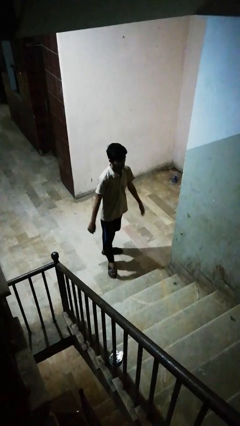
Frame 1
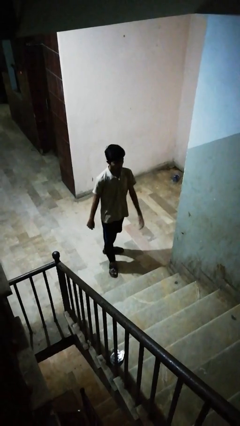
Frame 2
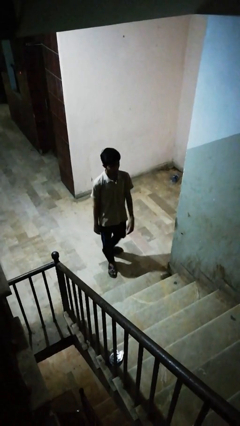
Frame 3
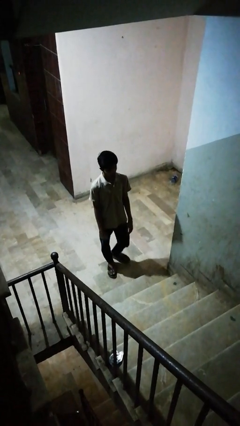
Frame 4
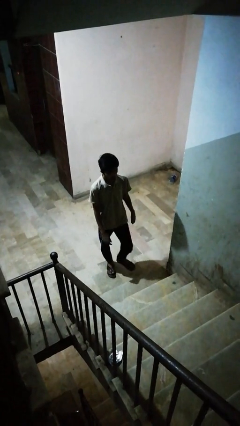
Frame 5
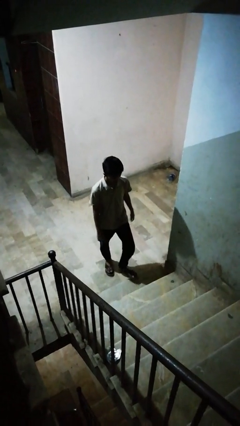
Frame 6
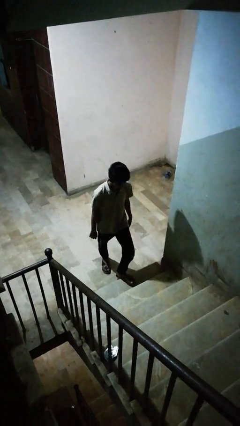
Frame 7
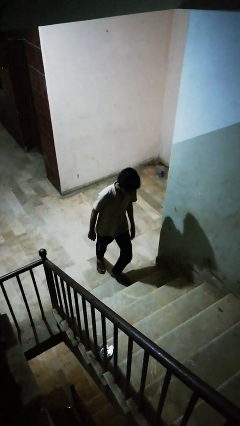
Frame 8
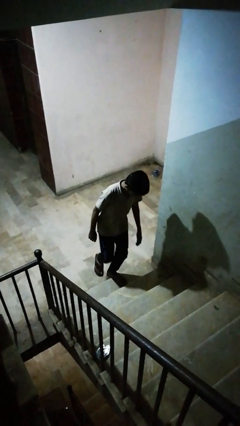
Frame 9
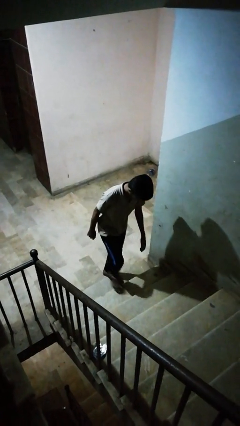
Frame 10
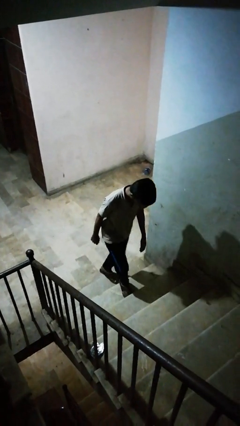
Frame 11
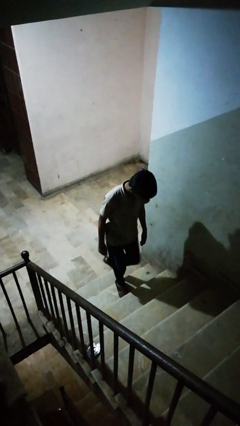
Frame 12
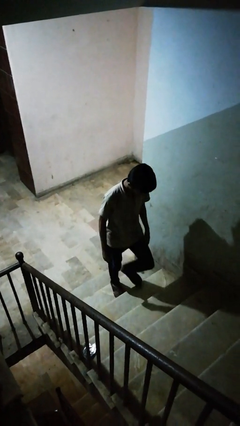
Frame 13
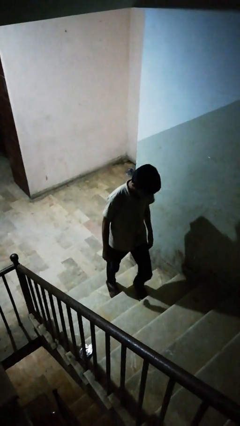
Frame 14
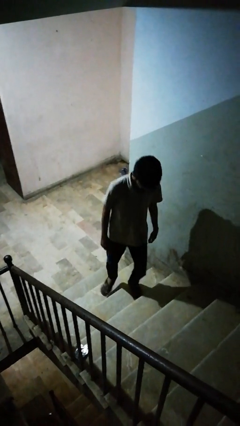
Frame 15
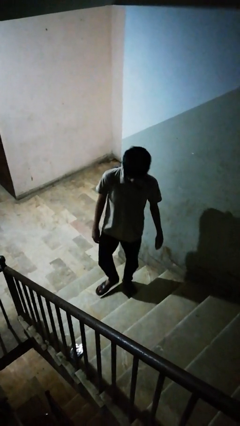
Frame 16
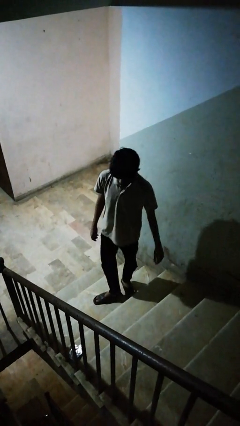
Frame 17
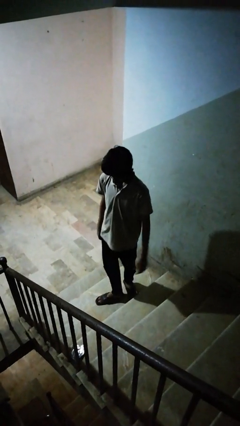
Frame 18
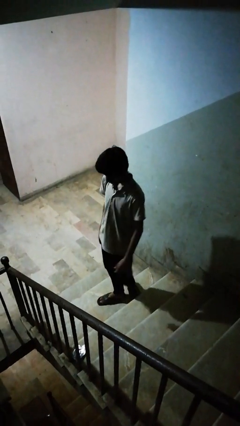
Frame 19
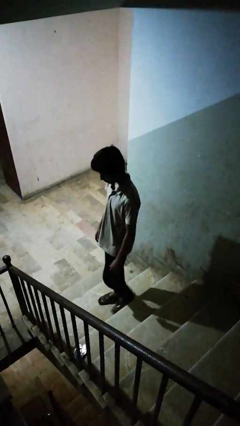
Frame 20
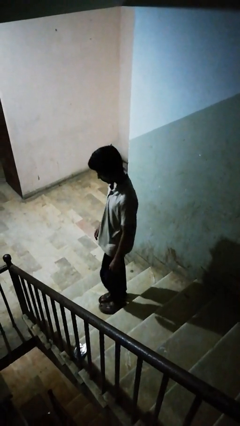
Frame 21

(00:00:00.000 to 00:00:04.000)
person climbs up stairs

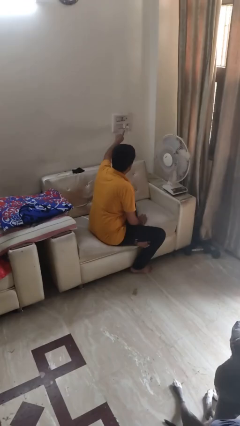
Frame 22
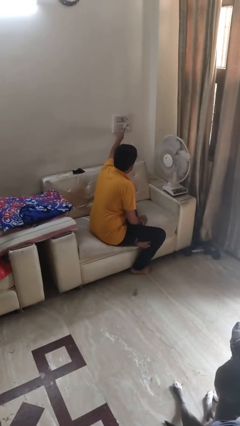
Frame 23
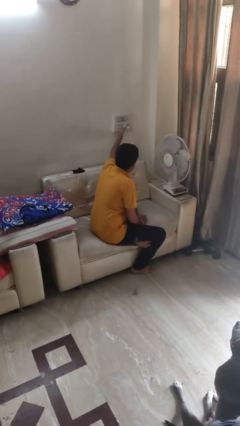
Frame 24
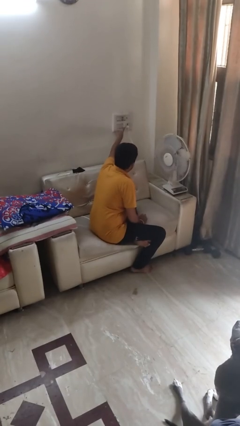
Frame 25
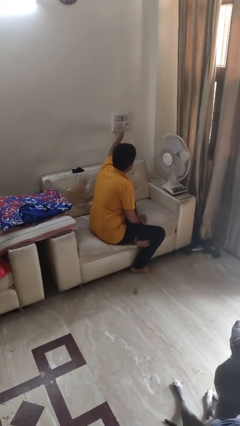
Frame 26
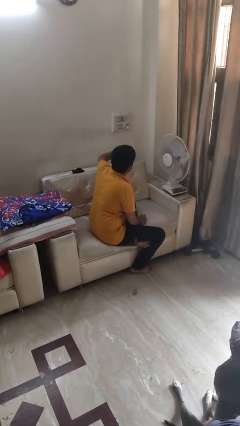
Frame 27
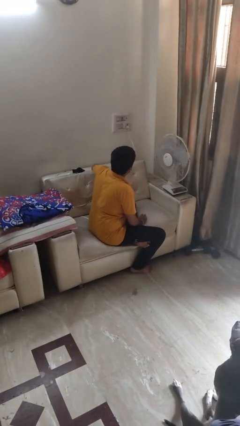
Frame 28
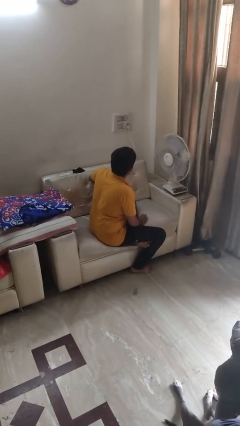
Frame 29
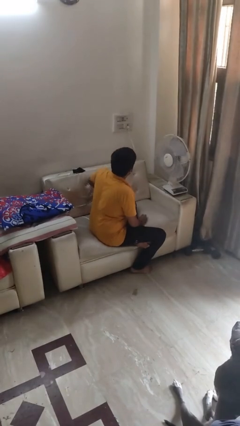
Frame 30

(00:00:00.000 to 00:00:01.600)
person turns on fan

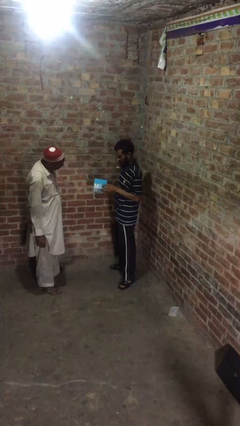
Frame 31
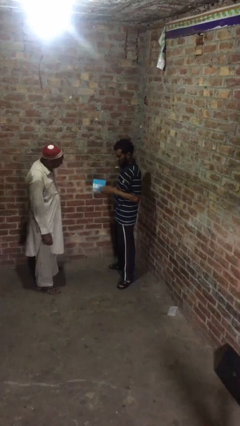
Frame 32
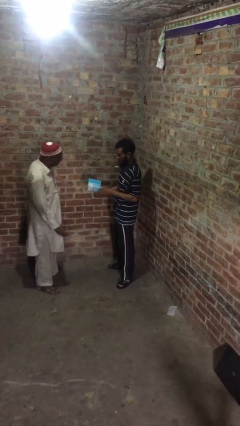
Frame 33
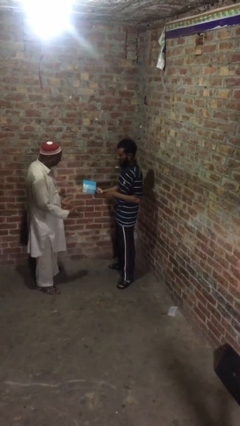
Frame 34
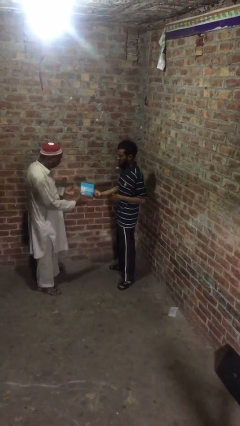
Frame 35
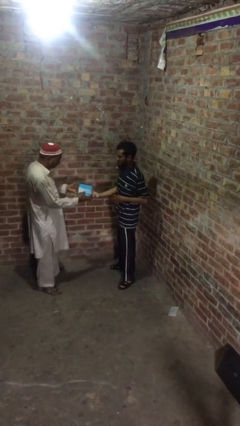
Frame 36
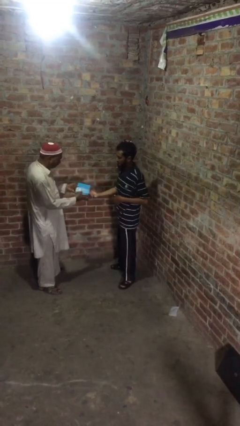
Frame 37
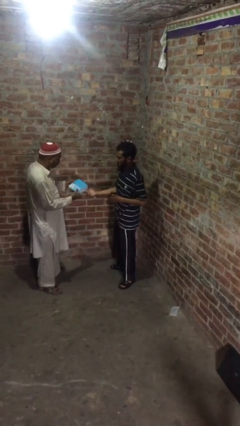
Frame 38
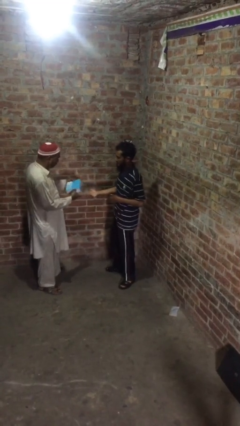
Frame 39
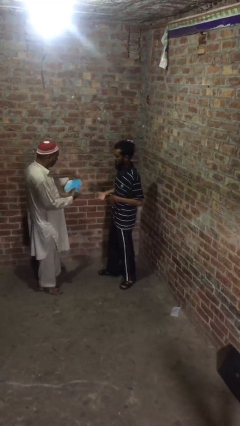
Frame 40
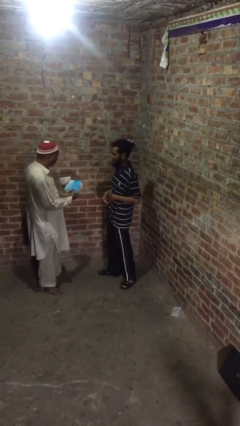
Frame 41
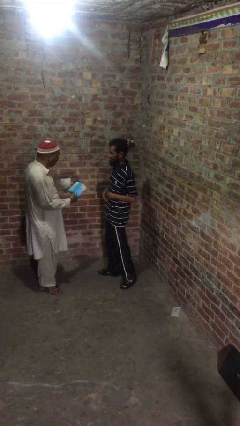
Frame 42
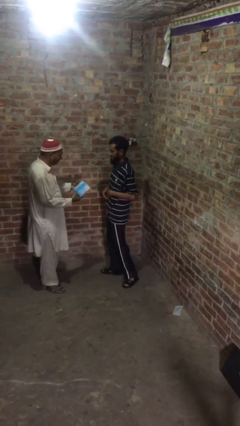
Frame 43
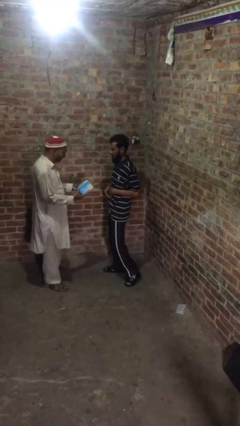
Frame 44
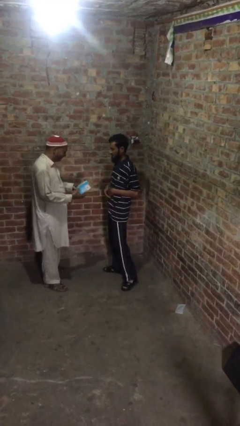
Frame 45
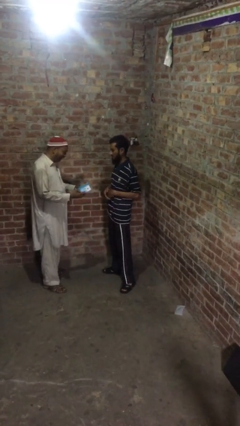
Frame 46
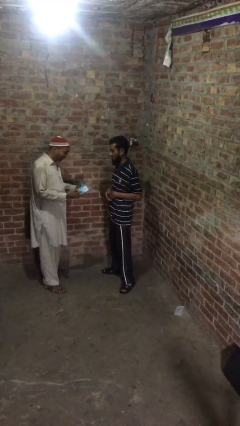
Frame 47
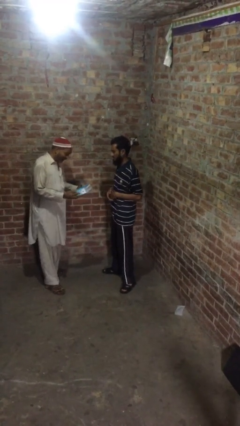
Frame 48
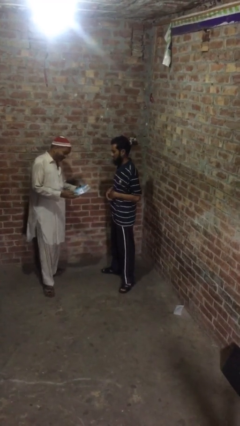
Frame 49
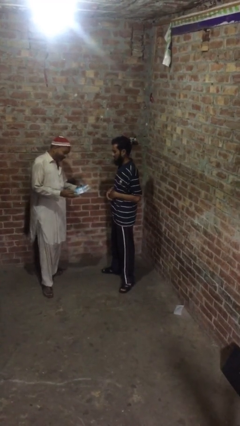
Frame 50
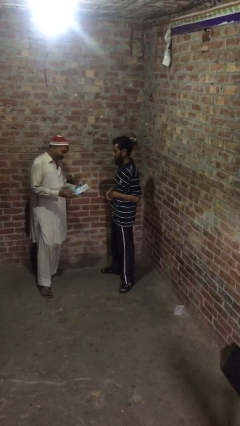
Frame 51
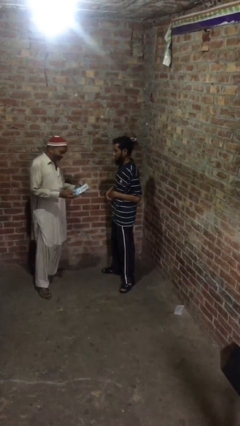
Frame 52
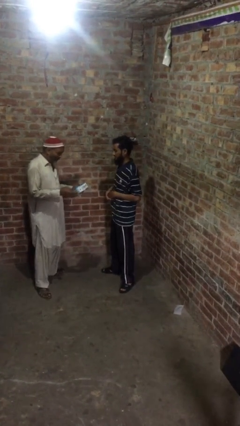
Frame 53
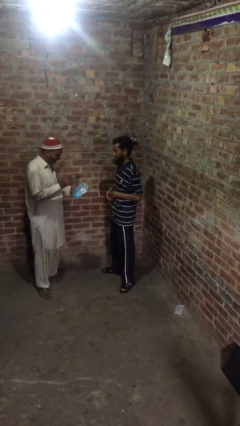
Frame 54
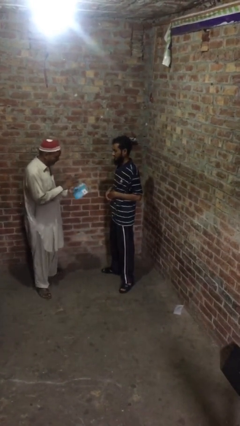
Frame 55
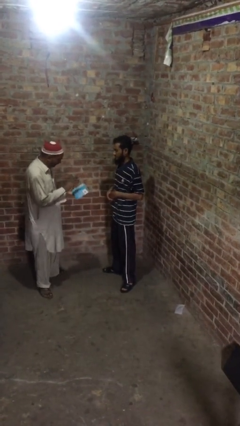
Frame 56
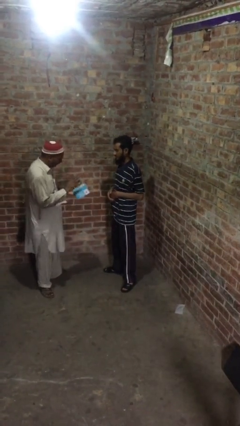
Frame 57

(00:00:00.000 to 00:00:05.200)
person transfers object to person

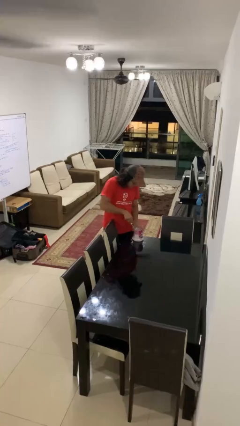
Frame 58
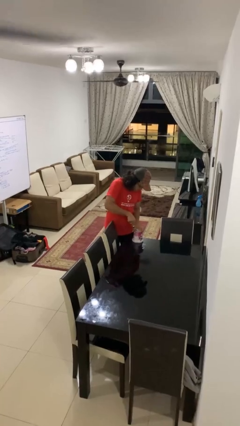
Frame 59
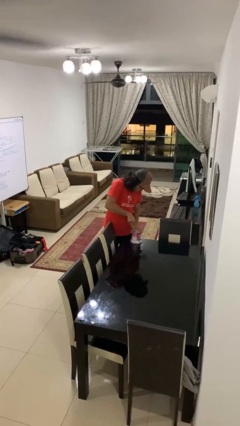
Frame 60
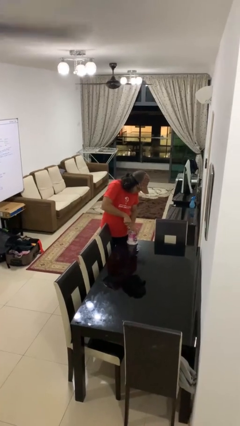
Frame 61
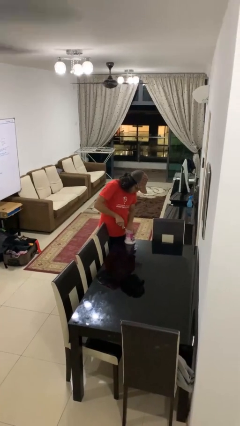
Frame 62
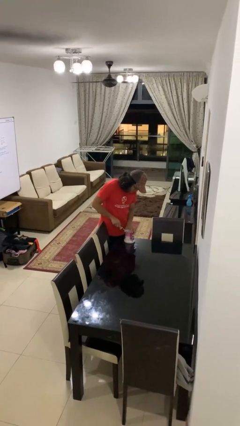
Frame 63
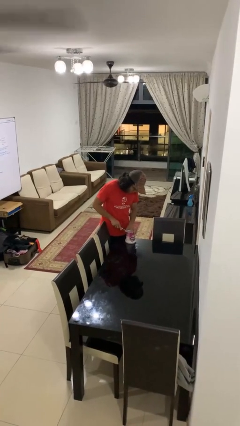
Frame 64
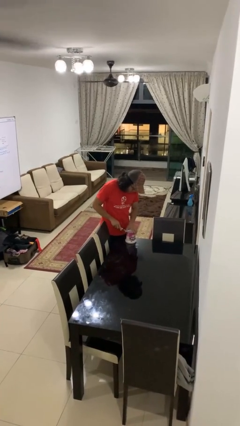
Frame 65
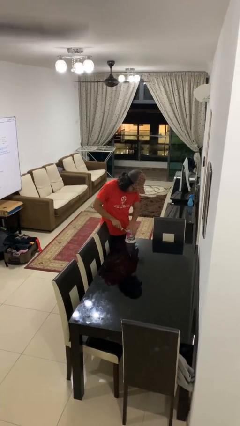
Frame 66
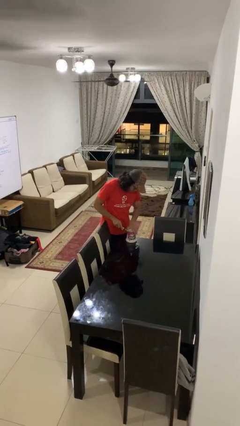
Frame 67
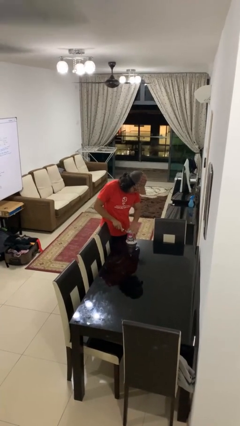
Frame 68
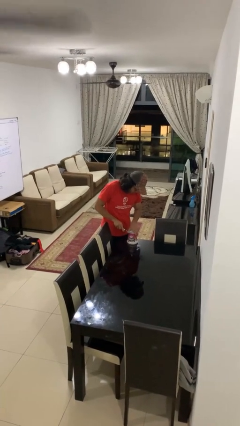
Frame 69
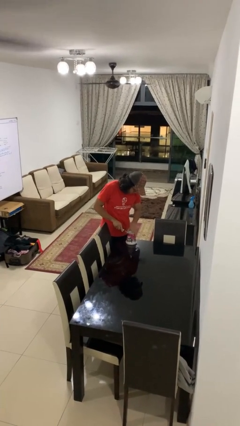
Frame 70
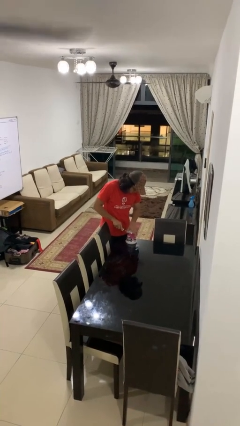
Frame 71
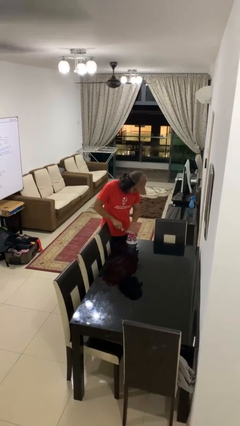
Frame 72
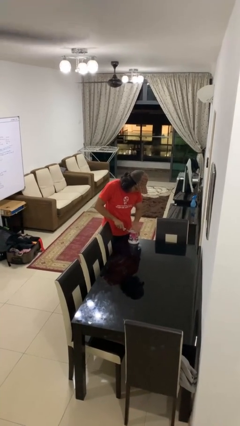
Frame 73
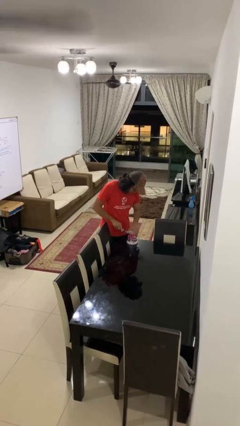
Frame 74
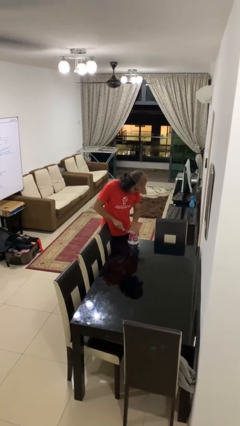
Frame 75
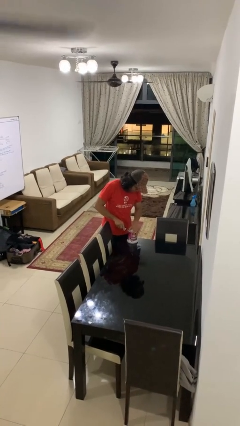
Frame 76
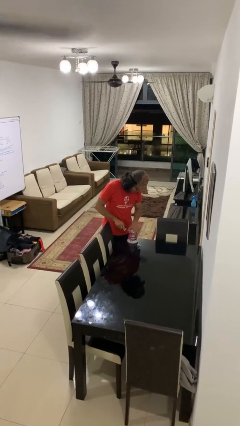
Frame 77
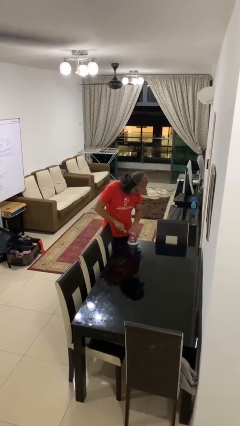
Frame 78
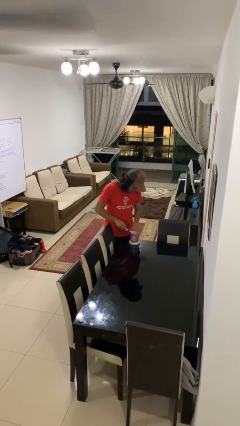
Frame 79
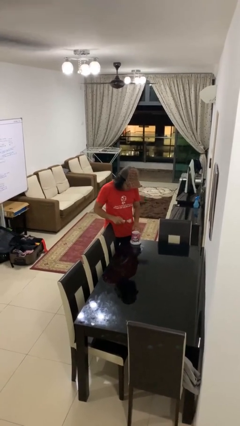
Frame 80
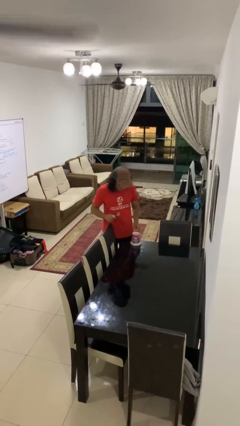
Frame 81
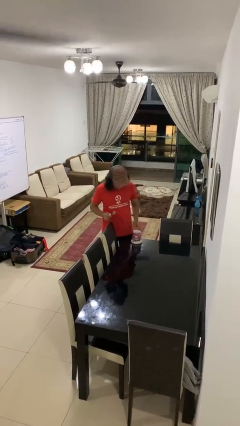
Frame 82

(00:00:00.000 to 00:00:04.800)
person opens can with can opener

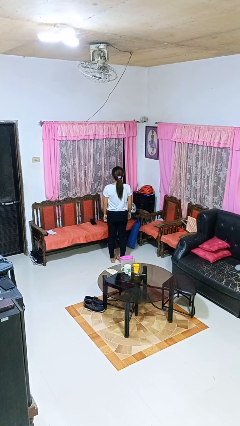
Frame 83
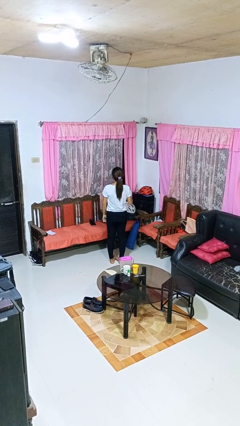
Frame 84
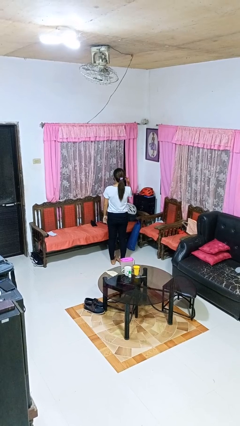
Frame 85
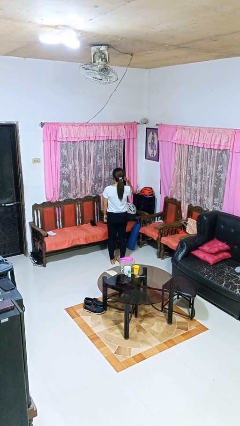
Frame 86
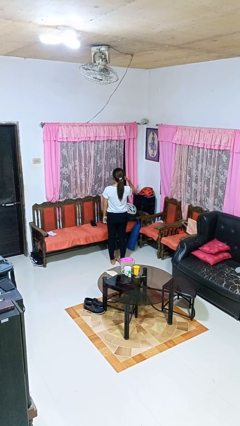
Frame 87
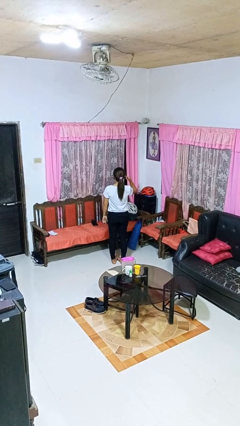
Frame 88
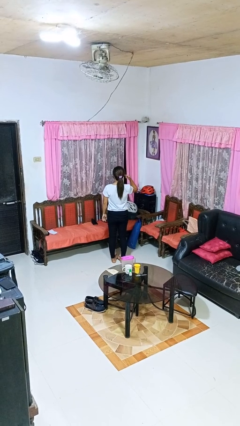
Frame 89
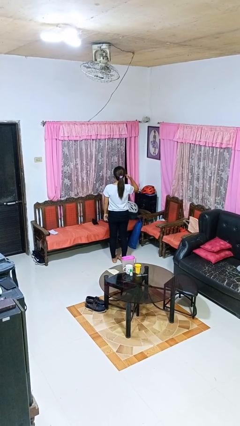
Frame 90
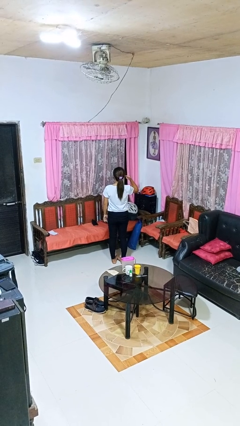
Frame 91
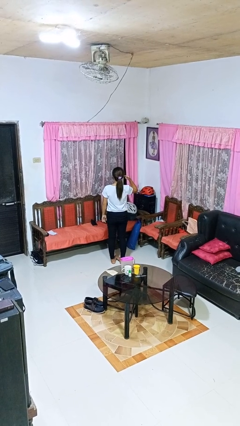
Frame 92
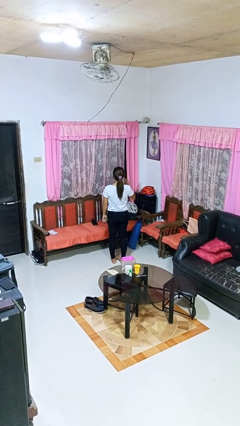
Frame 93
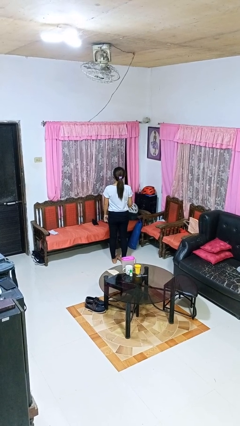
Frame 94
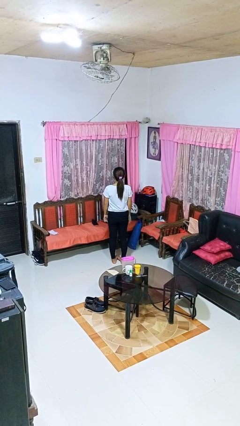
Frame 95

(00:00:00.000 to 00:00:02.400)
person gestures listen closely
